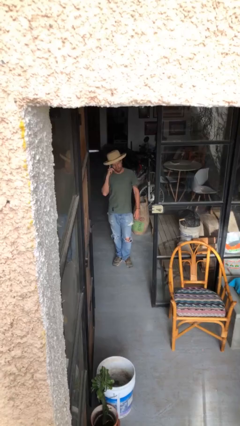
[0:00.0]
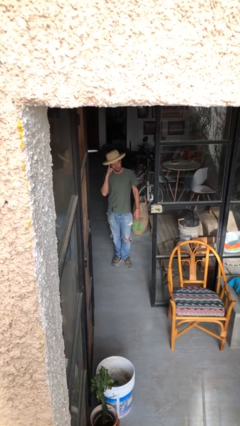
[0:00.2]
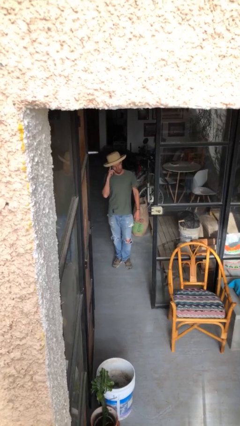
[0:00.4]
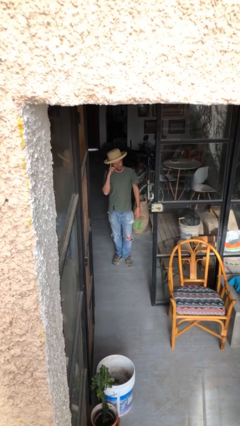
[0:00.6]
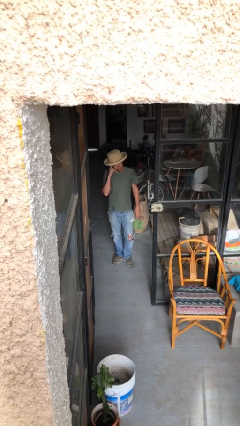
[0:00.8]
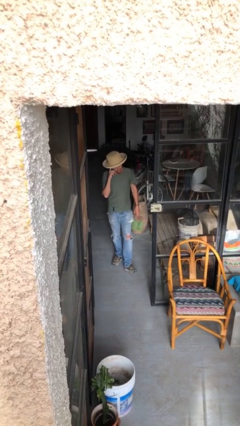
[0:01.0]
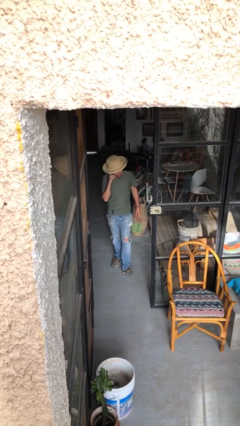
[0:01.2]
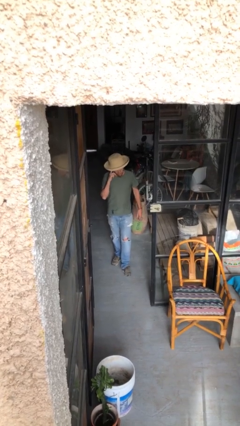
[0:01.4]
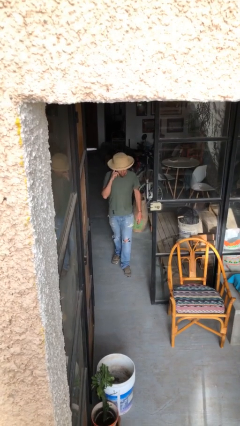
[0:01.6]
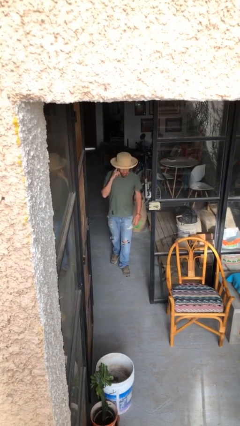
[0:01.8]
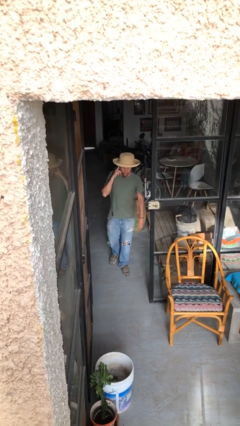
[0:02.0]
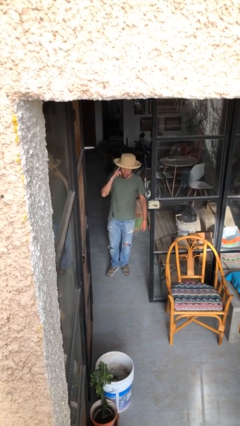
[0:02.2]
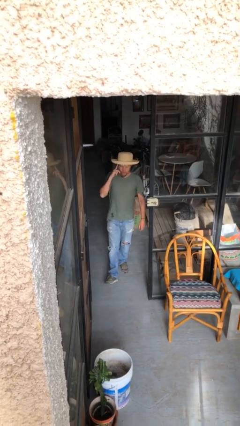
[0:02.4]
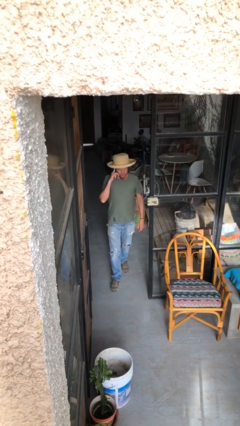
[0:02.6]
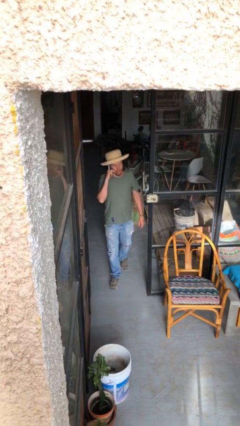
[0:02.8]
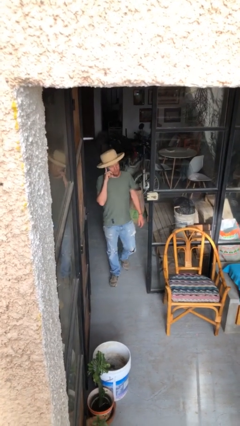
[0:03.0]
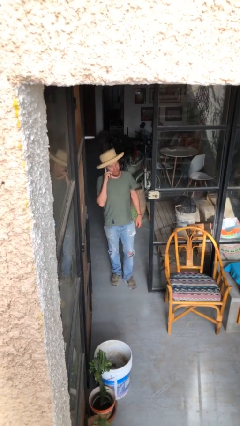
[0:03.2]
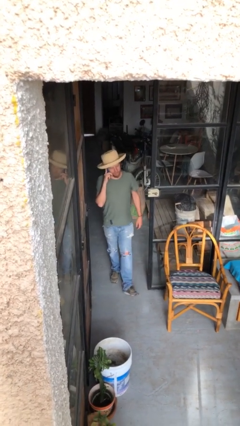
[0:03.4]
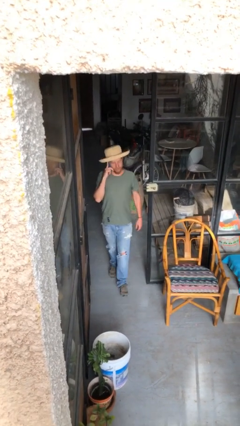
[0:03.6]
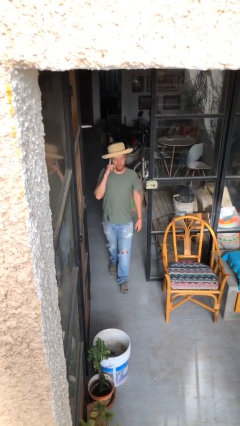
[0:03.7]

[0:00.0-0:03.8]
person enters scene through structure

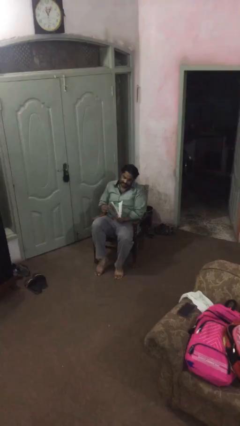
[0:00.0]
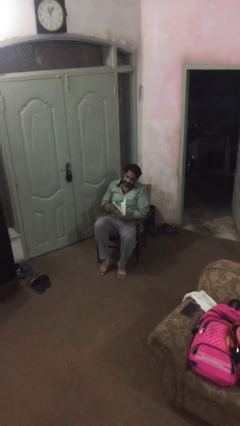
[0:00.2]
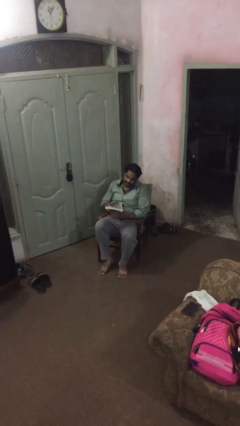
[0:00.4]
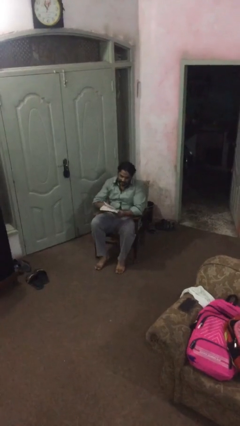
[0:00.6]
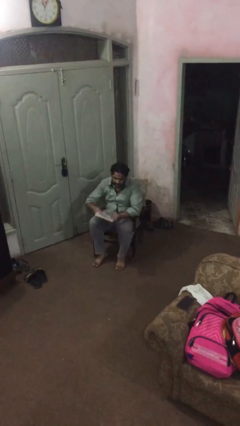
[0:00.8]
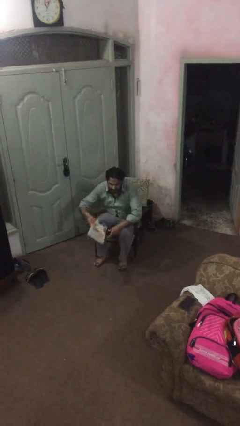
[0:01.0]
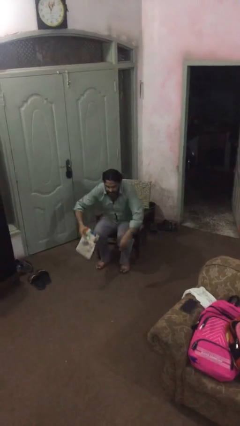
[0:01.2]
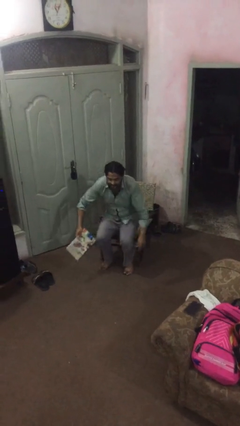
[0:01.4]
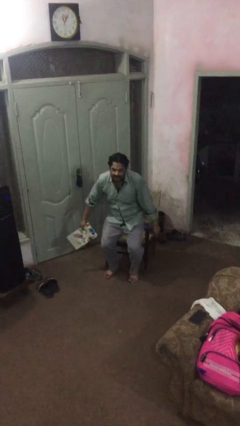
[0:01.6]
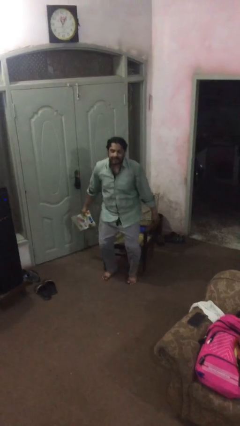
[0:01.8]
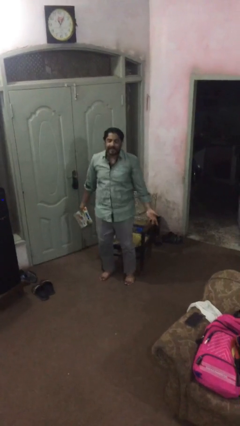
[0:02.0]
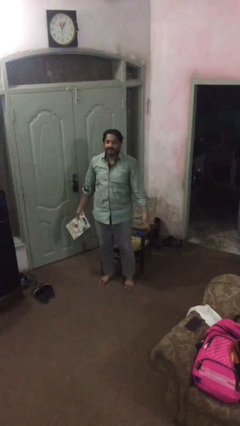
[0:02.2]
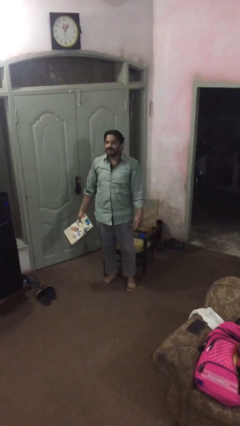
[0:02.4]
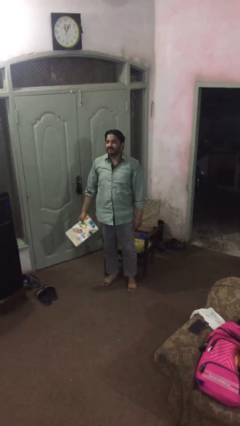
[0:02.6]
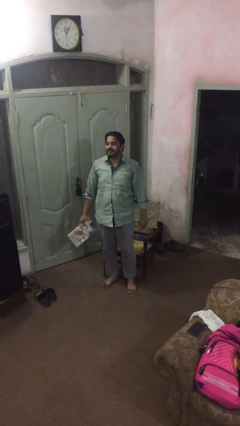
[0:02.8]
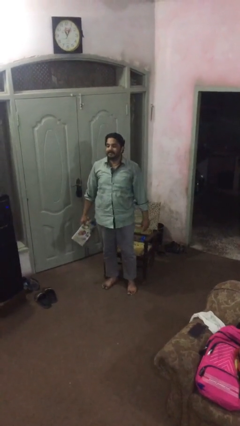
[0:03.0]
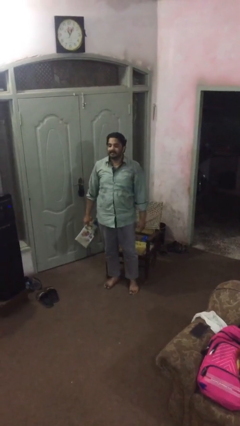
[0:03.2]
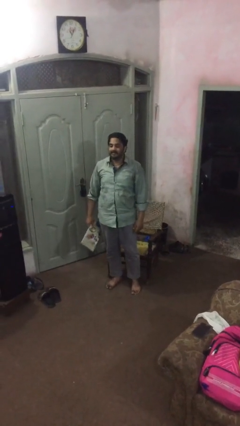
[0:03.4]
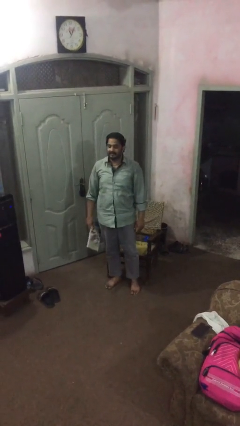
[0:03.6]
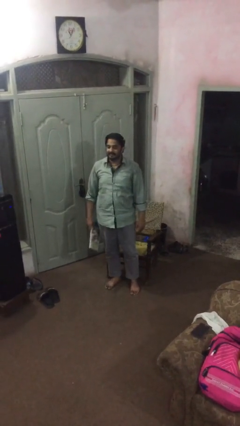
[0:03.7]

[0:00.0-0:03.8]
person stands up

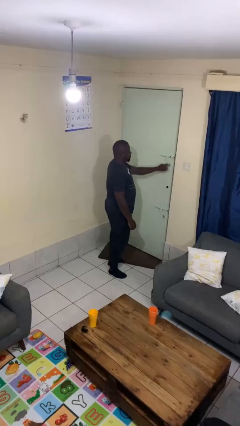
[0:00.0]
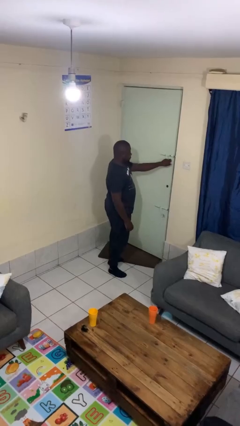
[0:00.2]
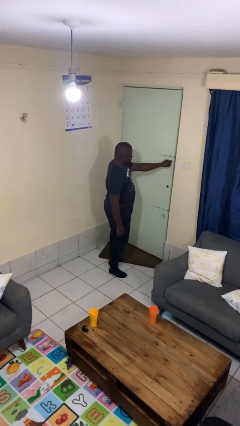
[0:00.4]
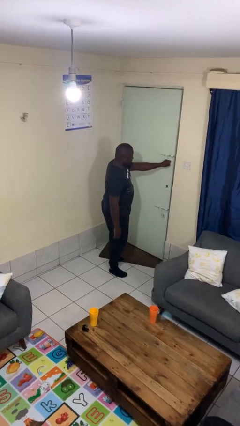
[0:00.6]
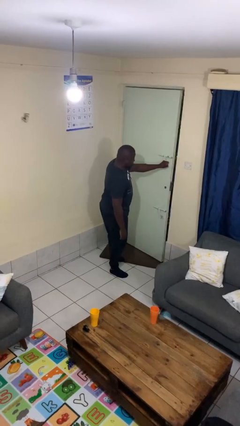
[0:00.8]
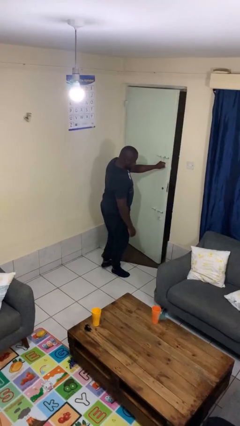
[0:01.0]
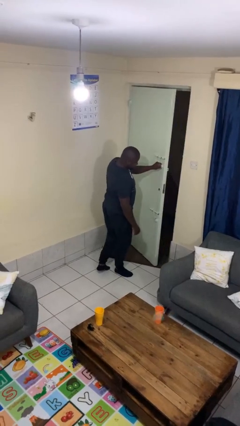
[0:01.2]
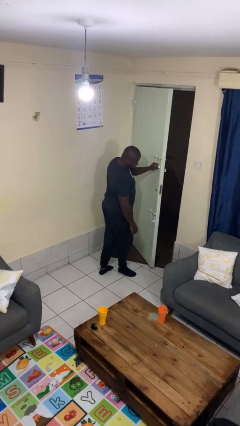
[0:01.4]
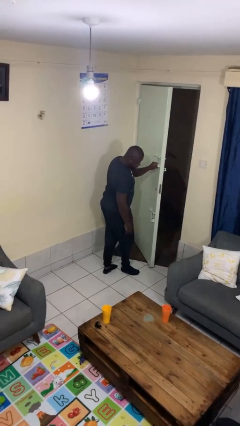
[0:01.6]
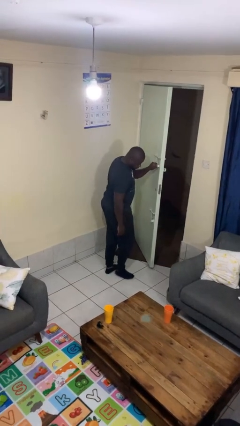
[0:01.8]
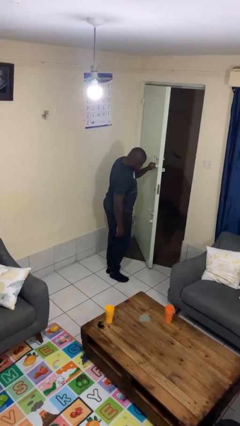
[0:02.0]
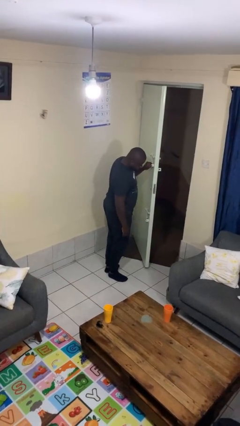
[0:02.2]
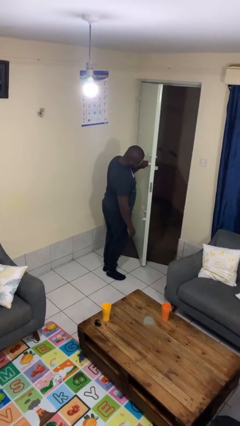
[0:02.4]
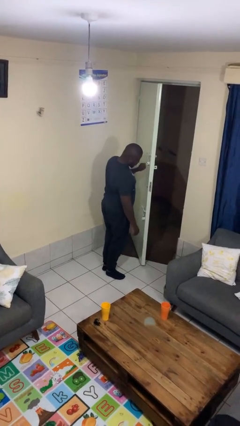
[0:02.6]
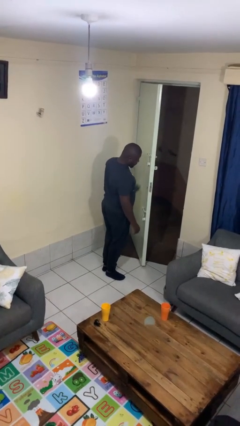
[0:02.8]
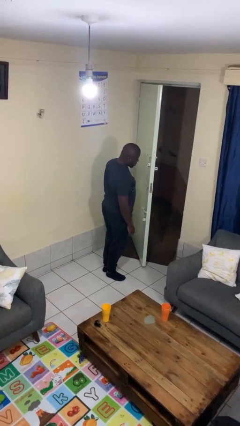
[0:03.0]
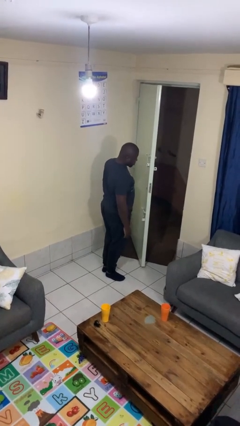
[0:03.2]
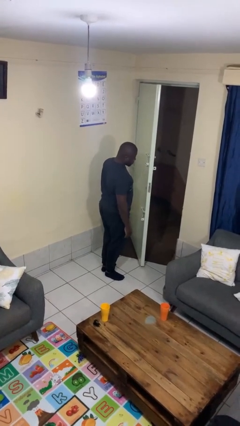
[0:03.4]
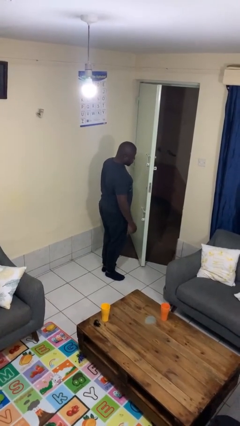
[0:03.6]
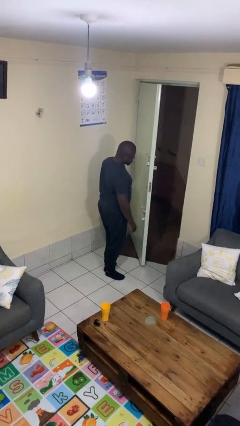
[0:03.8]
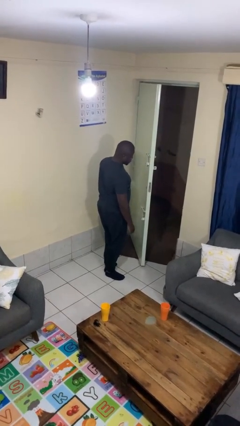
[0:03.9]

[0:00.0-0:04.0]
person opens facility door

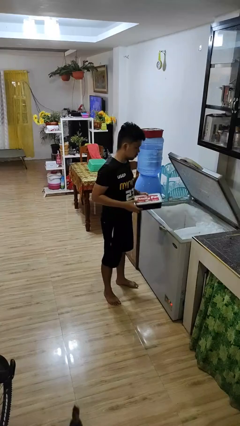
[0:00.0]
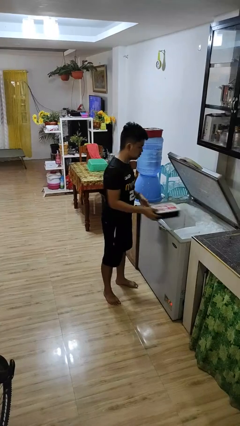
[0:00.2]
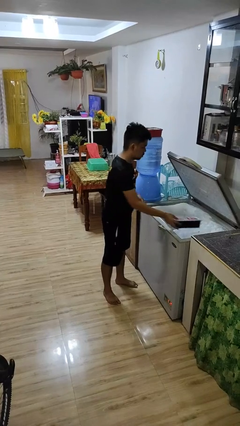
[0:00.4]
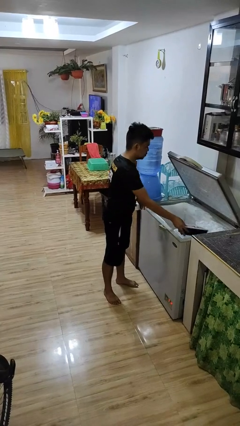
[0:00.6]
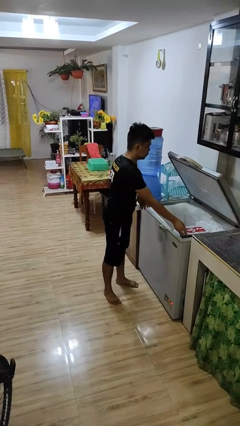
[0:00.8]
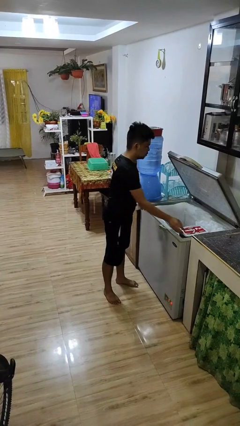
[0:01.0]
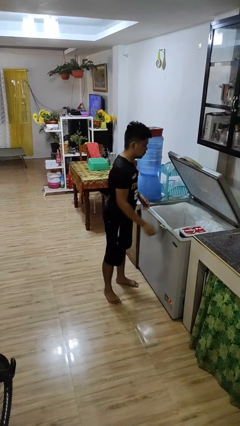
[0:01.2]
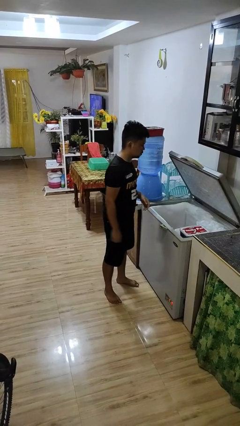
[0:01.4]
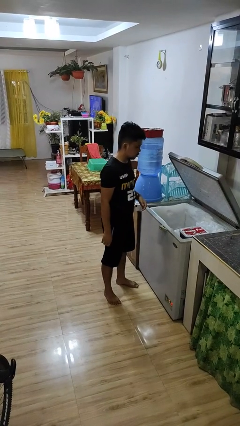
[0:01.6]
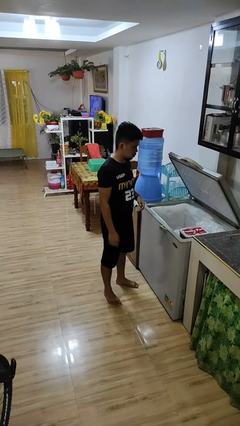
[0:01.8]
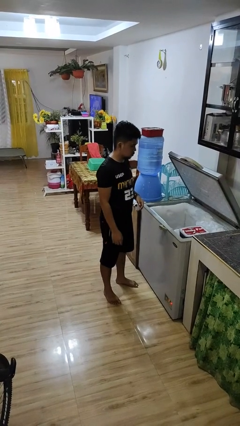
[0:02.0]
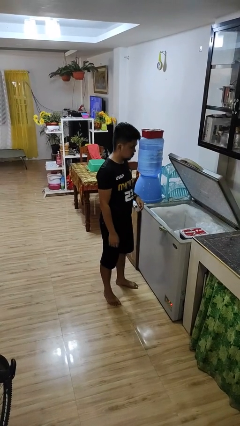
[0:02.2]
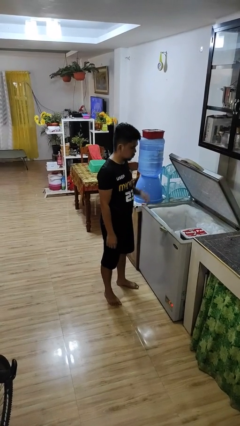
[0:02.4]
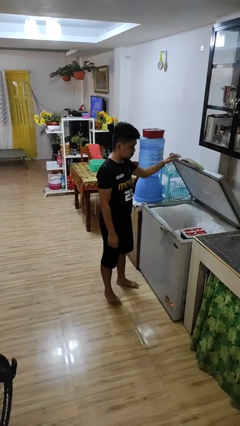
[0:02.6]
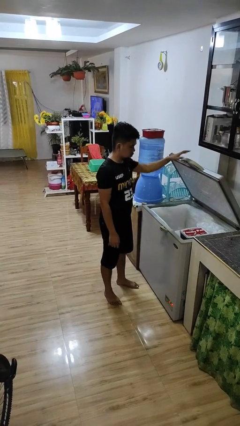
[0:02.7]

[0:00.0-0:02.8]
person puts object into refrigerator

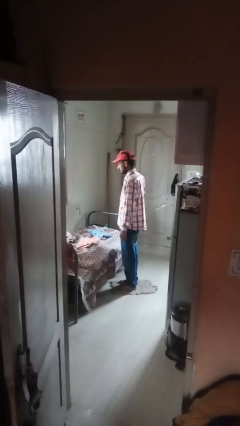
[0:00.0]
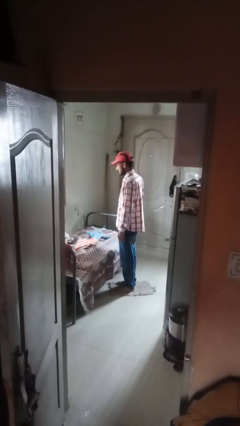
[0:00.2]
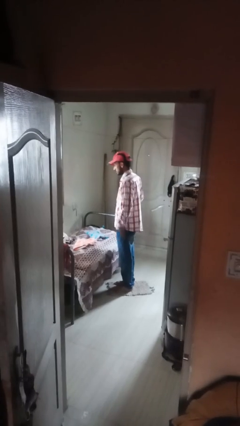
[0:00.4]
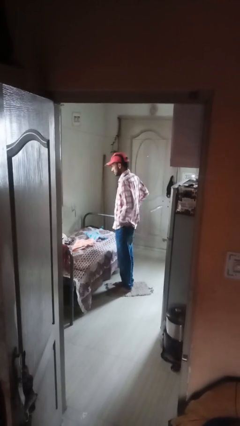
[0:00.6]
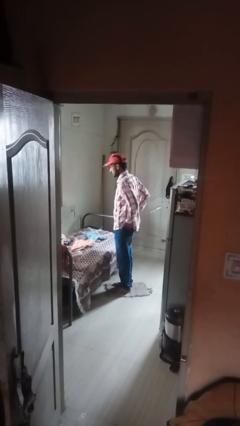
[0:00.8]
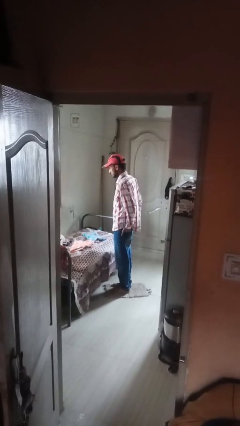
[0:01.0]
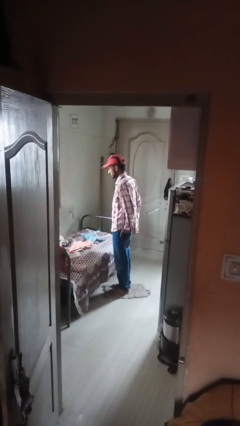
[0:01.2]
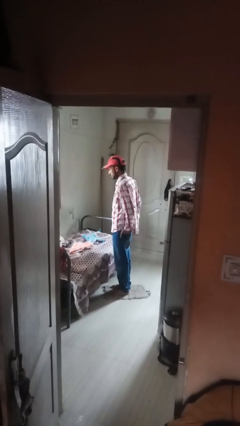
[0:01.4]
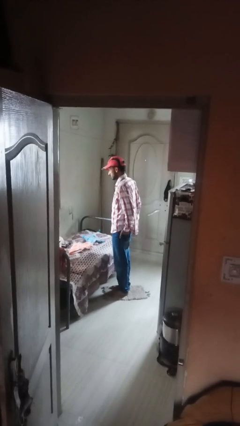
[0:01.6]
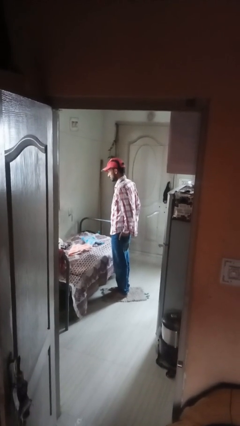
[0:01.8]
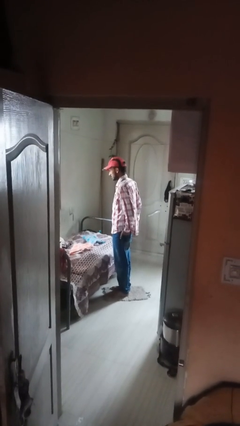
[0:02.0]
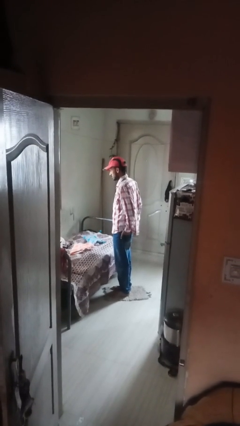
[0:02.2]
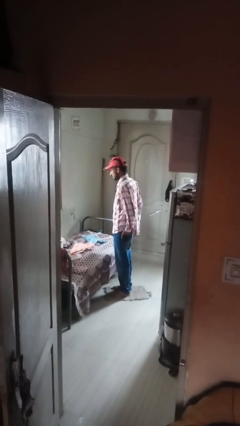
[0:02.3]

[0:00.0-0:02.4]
person puts hands in back pockets
